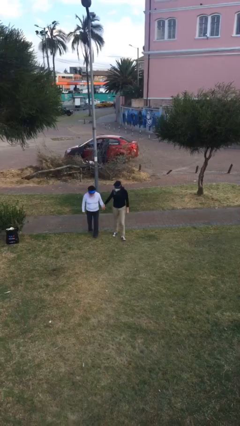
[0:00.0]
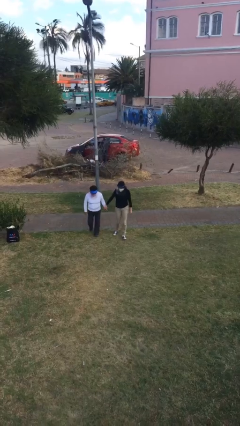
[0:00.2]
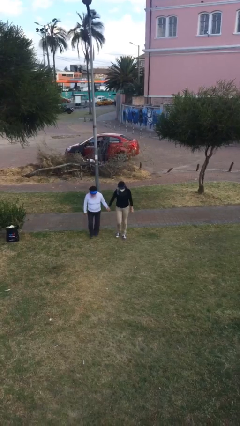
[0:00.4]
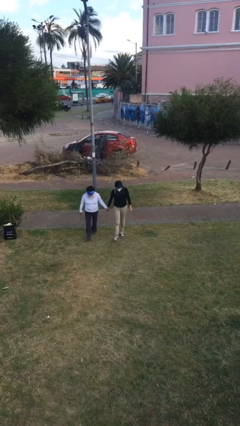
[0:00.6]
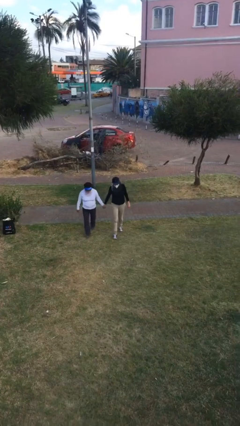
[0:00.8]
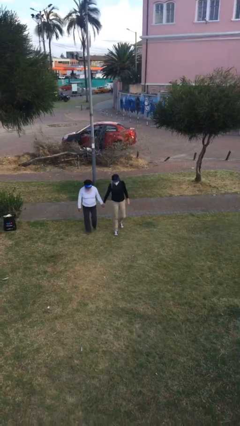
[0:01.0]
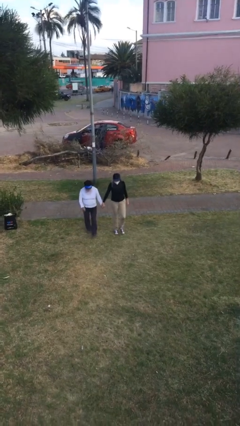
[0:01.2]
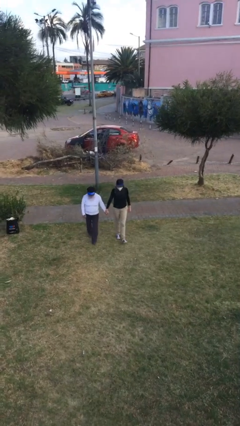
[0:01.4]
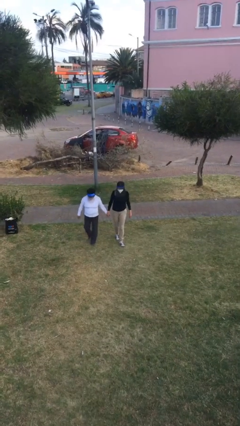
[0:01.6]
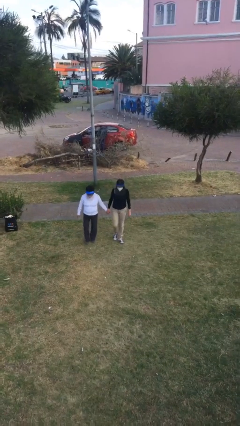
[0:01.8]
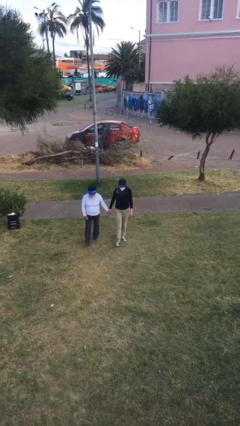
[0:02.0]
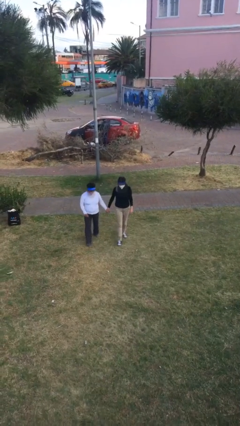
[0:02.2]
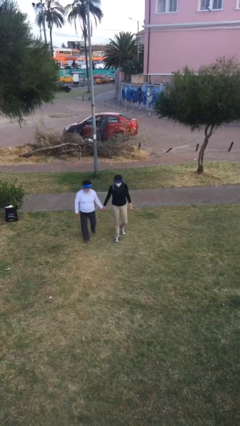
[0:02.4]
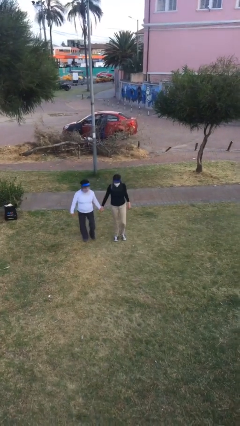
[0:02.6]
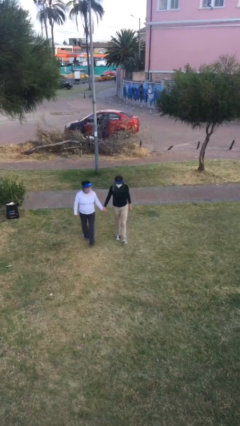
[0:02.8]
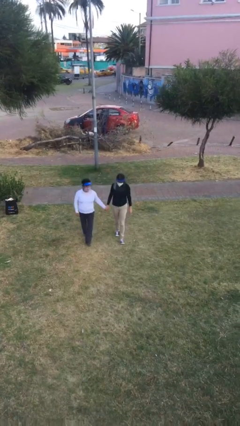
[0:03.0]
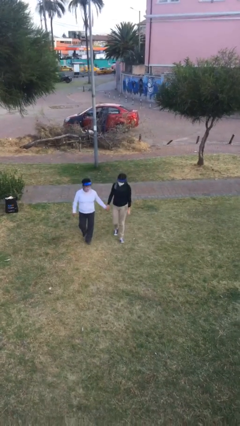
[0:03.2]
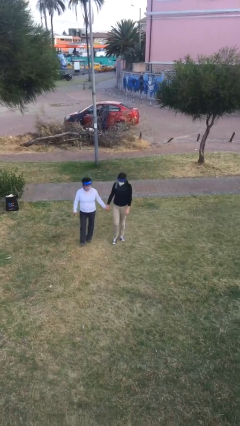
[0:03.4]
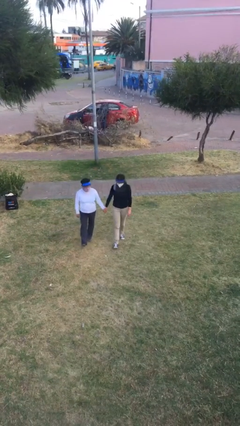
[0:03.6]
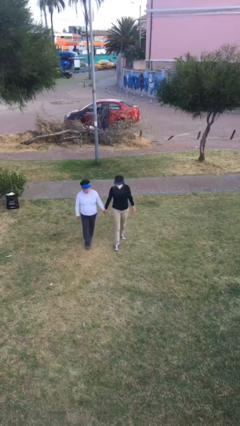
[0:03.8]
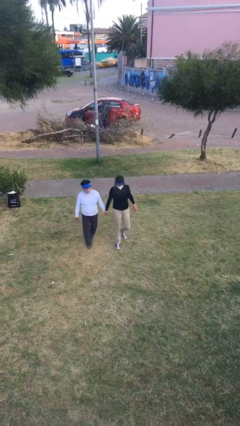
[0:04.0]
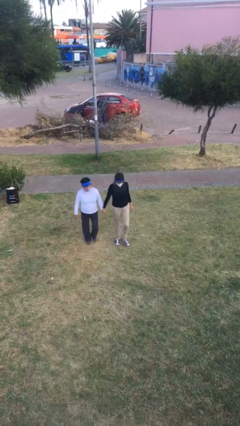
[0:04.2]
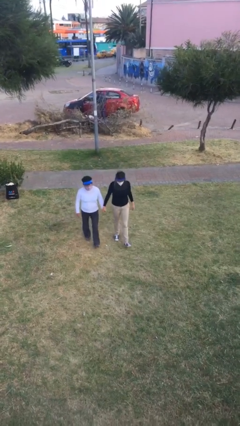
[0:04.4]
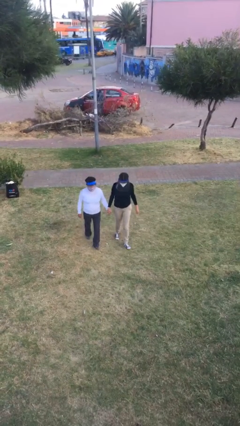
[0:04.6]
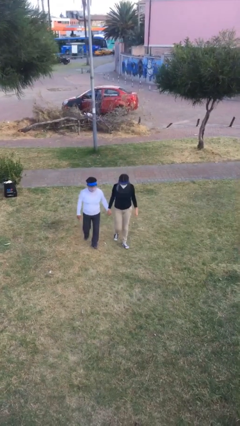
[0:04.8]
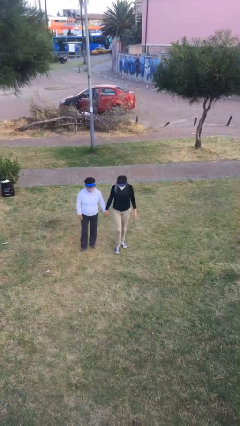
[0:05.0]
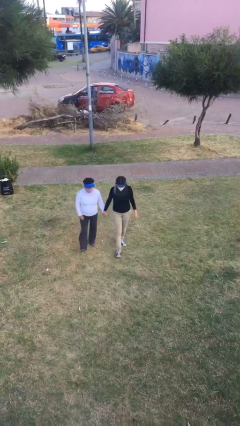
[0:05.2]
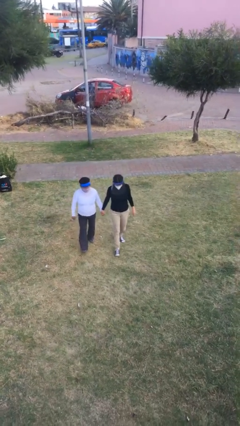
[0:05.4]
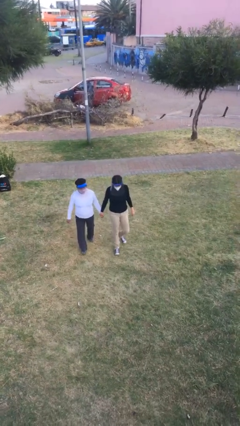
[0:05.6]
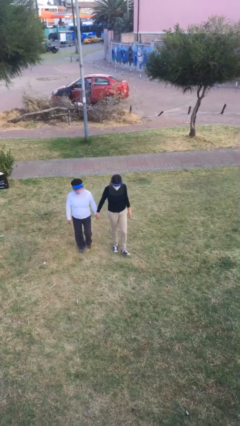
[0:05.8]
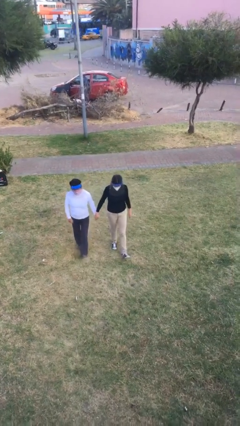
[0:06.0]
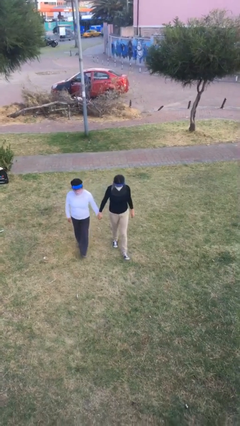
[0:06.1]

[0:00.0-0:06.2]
person holds hand

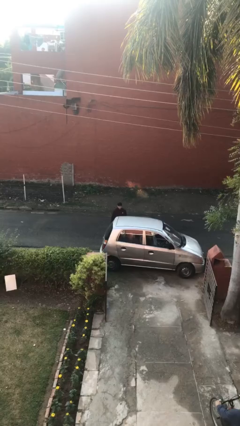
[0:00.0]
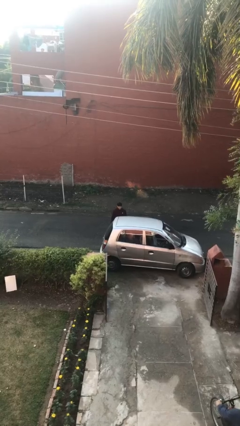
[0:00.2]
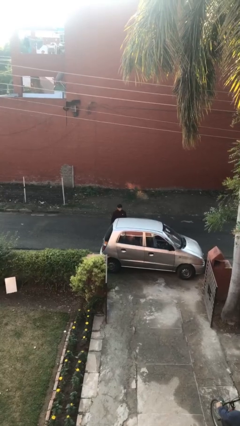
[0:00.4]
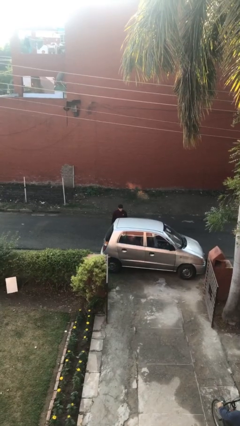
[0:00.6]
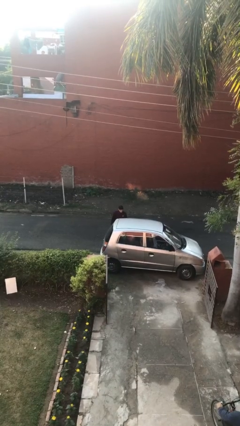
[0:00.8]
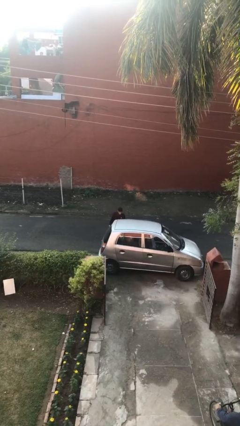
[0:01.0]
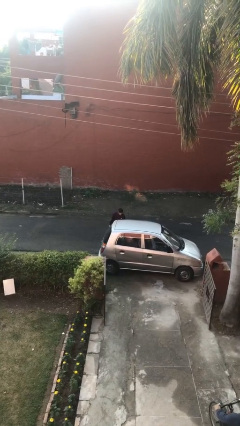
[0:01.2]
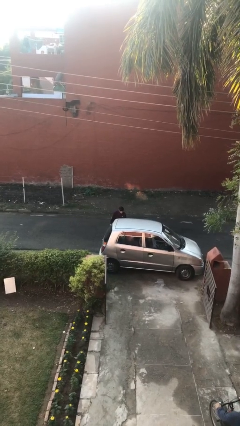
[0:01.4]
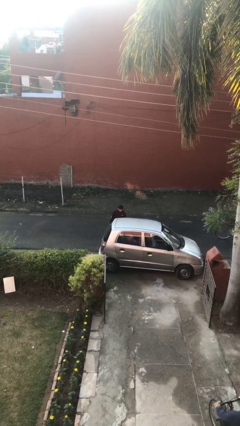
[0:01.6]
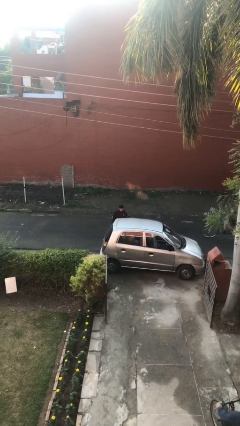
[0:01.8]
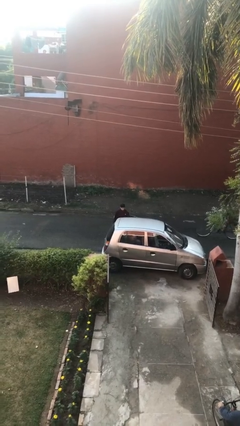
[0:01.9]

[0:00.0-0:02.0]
person opens car door

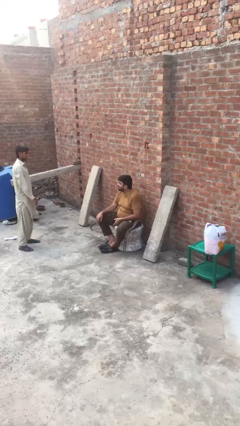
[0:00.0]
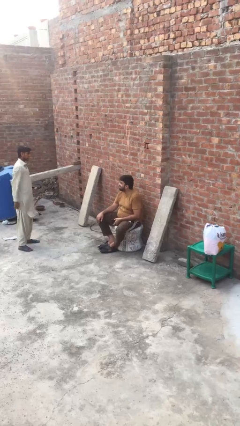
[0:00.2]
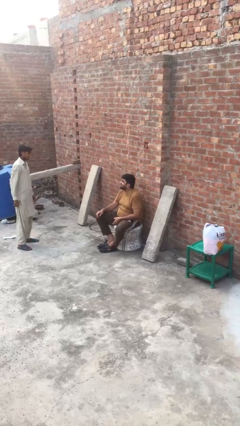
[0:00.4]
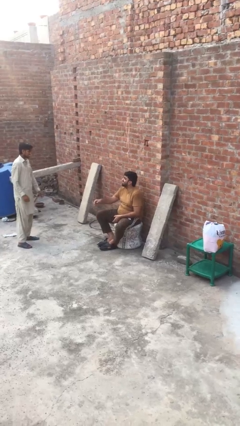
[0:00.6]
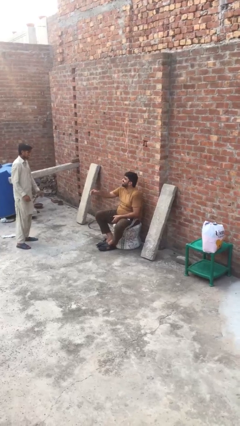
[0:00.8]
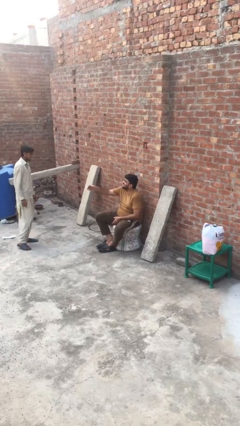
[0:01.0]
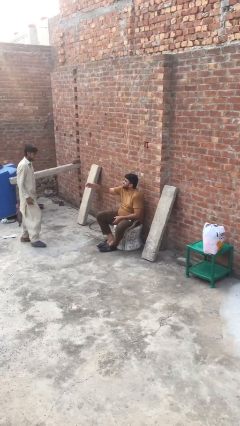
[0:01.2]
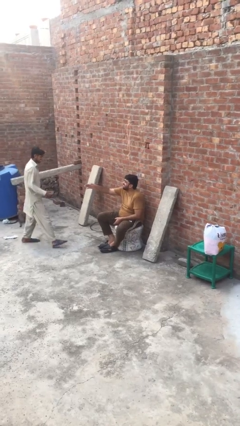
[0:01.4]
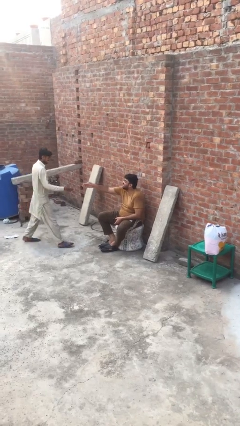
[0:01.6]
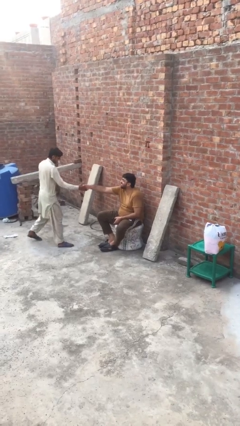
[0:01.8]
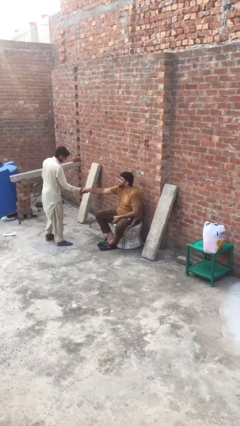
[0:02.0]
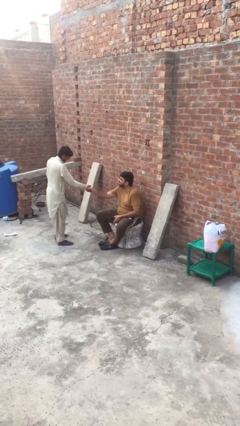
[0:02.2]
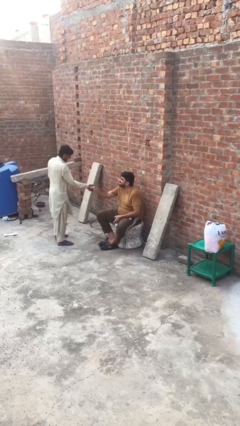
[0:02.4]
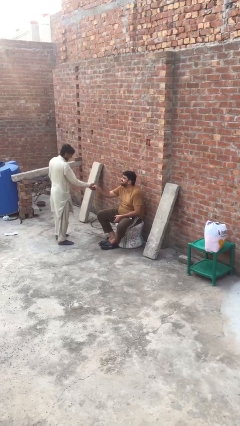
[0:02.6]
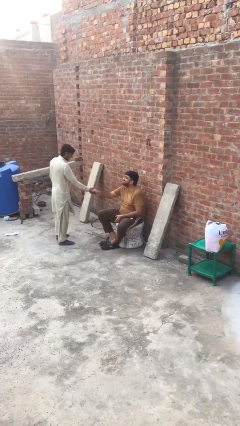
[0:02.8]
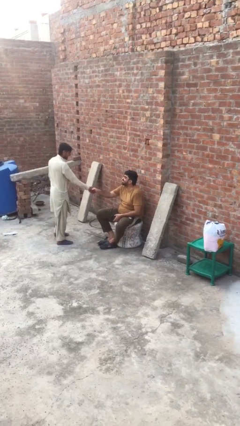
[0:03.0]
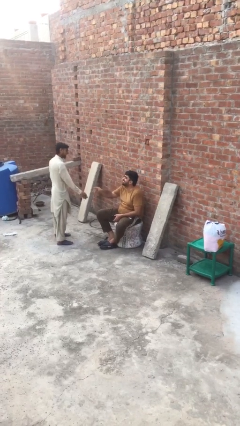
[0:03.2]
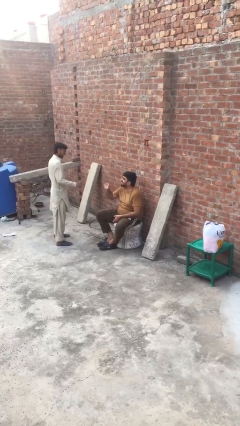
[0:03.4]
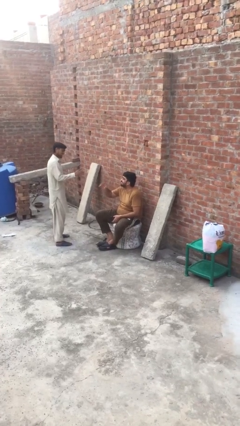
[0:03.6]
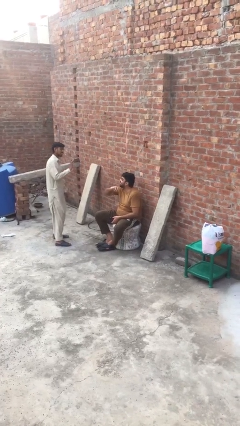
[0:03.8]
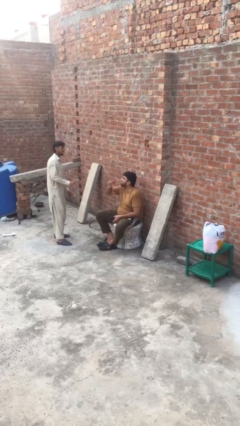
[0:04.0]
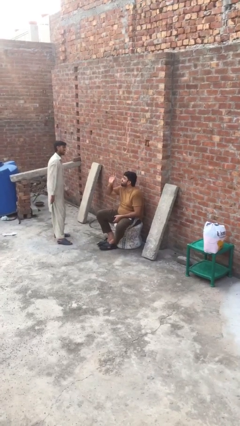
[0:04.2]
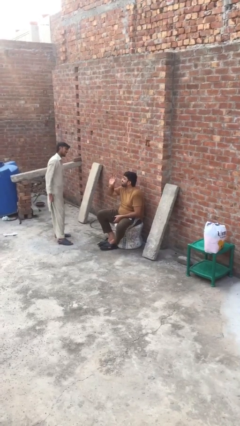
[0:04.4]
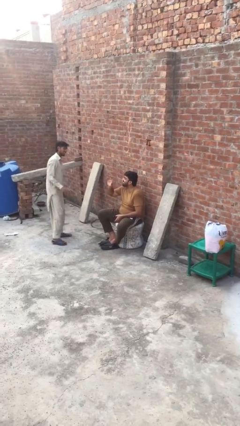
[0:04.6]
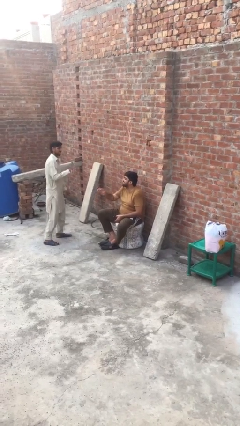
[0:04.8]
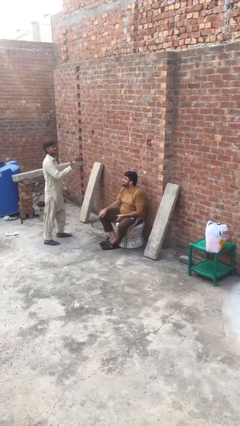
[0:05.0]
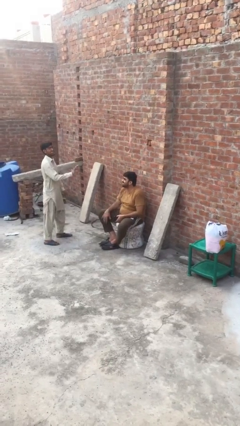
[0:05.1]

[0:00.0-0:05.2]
person shakes hand

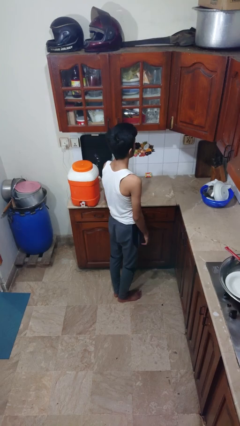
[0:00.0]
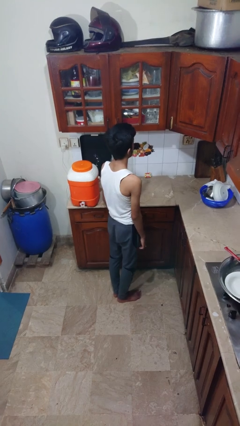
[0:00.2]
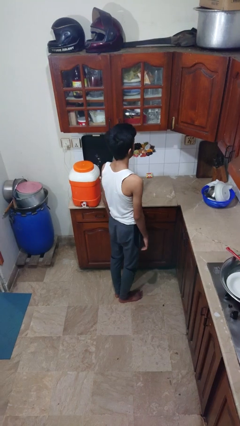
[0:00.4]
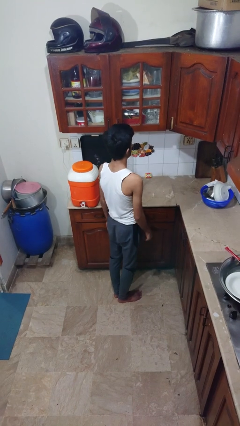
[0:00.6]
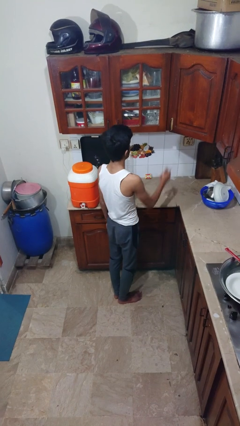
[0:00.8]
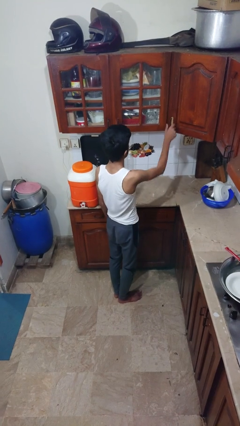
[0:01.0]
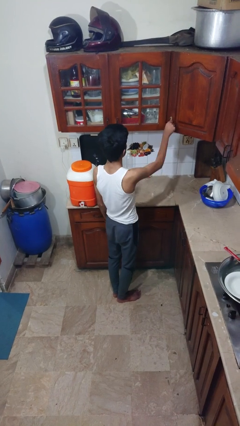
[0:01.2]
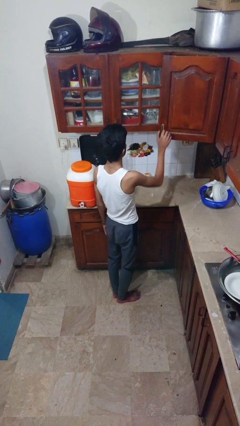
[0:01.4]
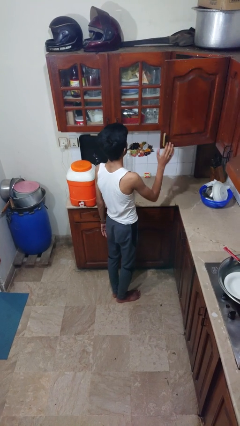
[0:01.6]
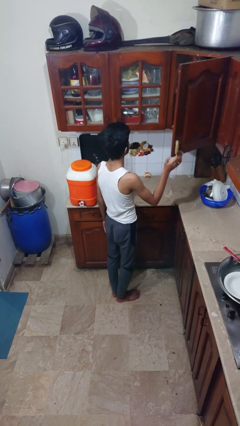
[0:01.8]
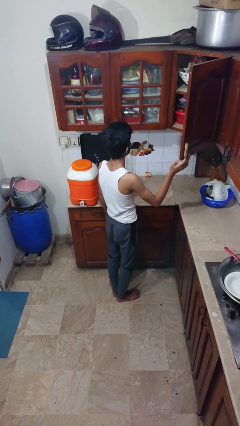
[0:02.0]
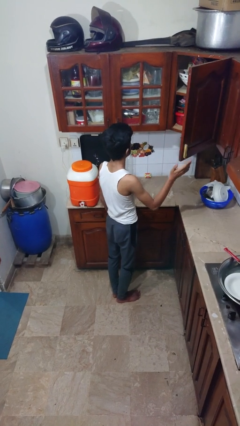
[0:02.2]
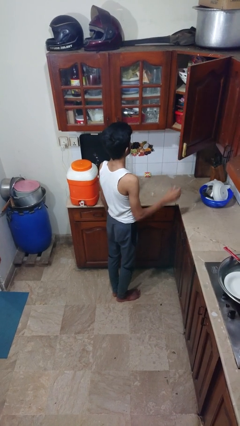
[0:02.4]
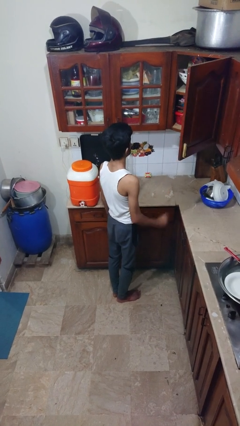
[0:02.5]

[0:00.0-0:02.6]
person closes cabinet

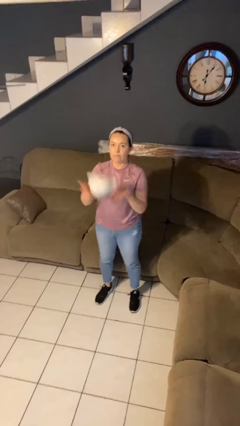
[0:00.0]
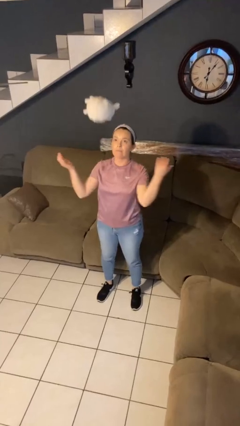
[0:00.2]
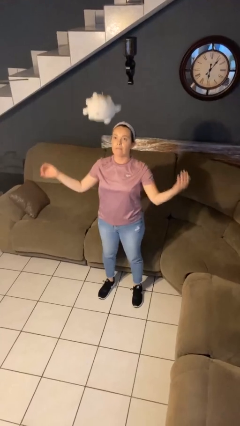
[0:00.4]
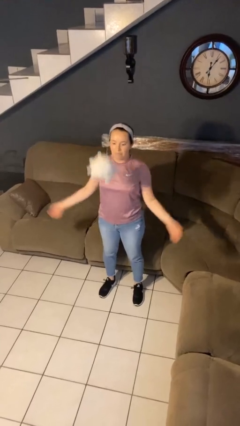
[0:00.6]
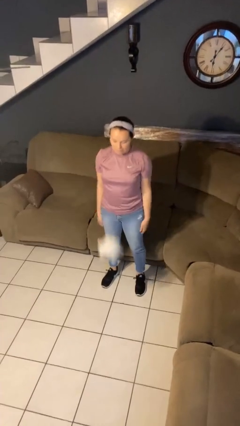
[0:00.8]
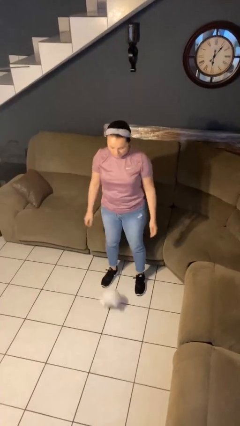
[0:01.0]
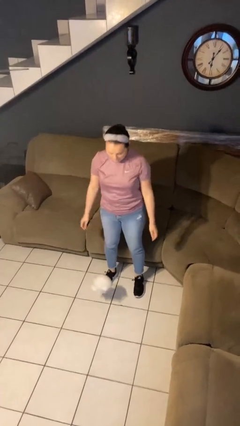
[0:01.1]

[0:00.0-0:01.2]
person throws object into air

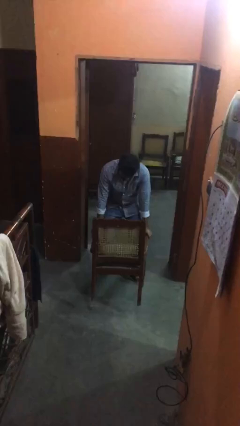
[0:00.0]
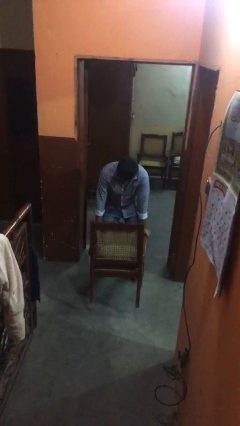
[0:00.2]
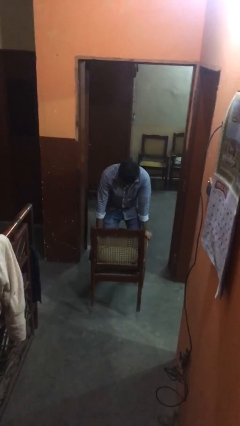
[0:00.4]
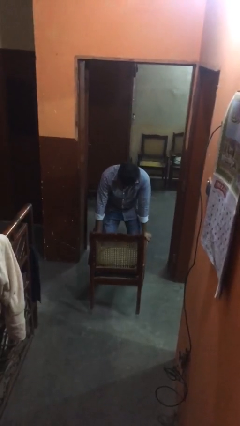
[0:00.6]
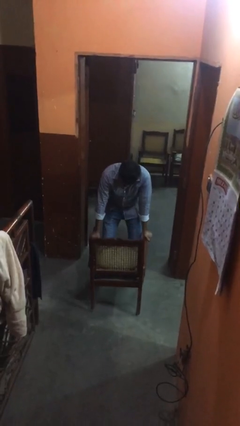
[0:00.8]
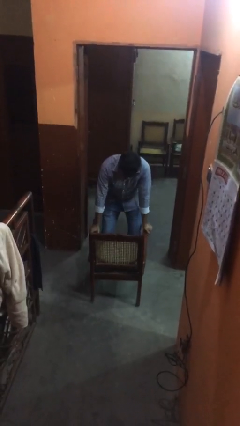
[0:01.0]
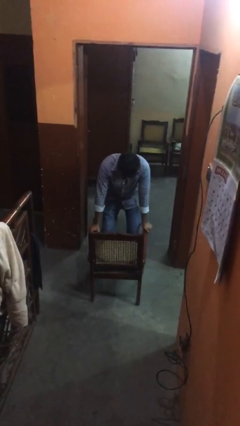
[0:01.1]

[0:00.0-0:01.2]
person puts down object on floor
